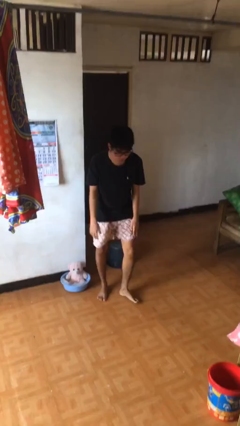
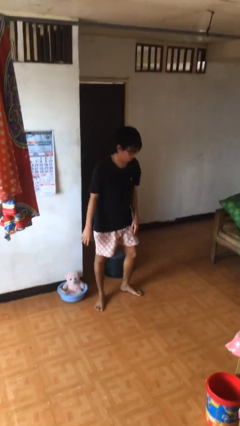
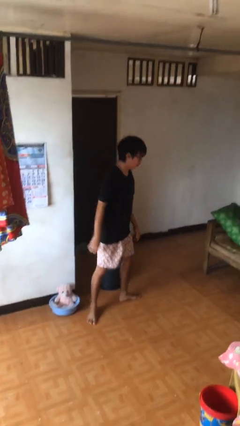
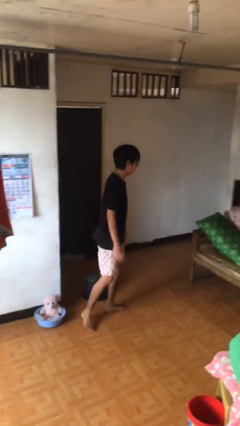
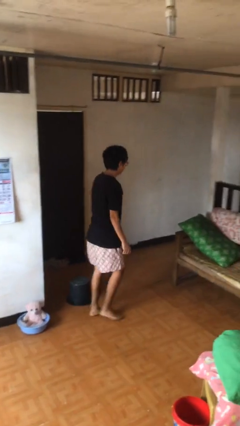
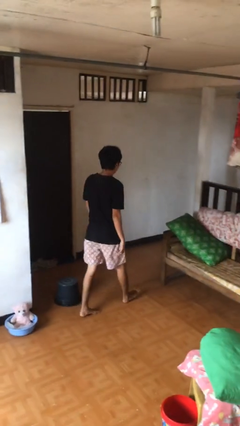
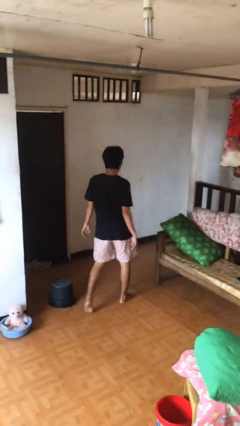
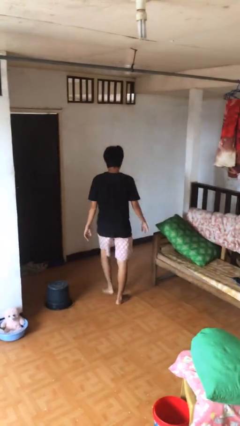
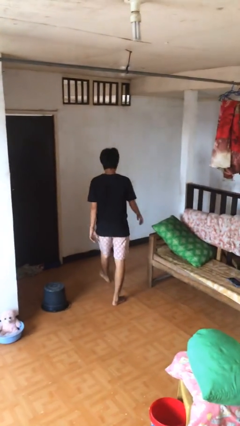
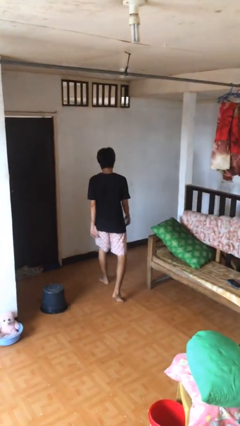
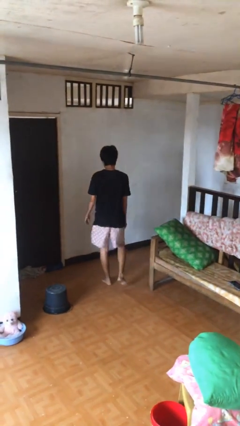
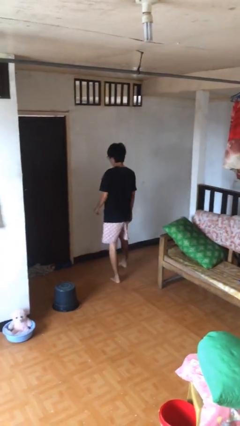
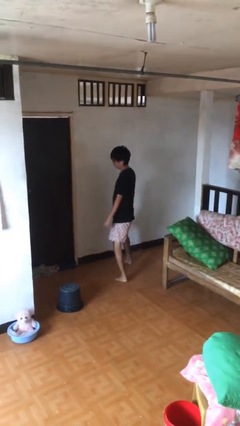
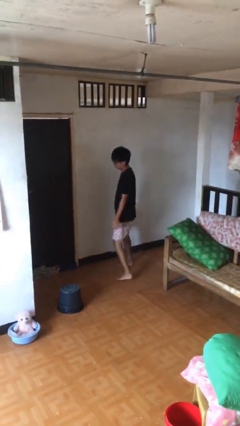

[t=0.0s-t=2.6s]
person stands up from floor

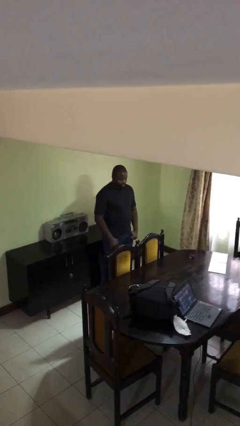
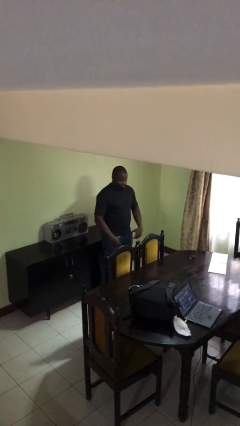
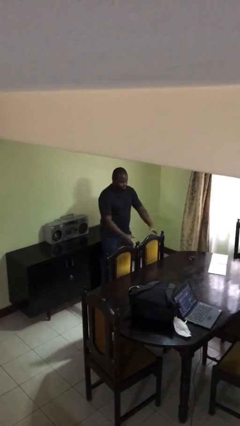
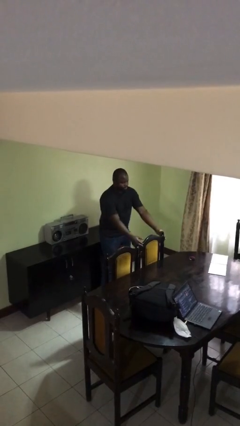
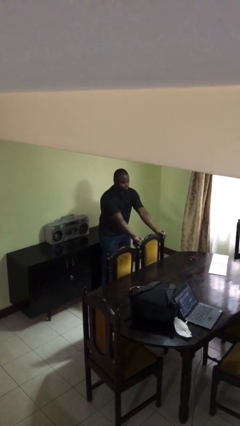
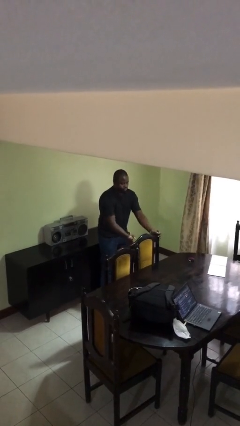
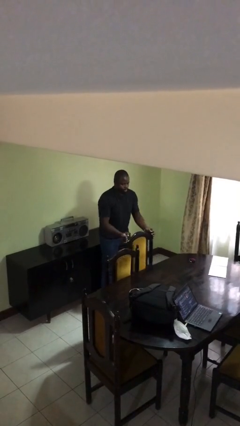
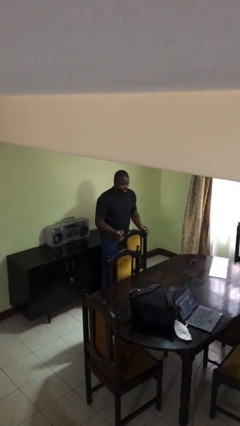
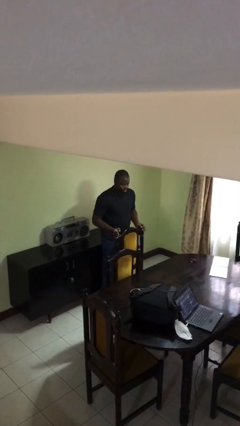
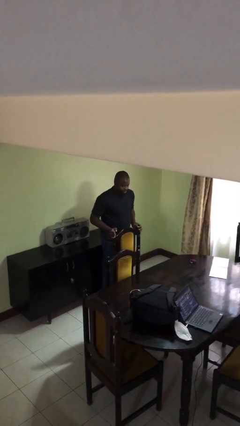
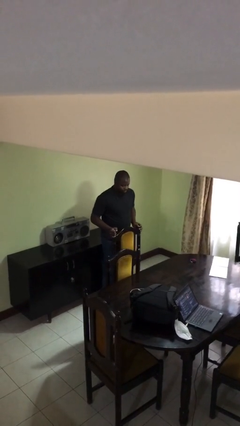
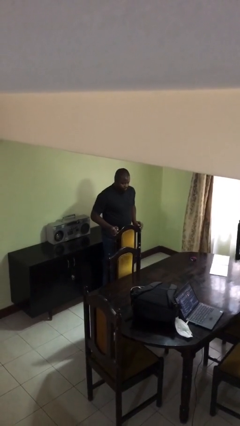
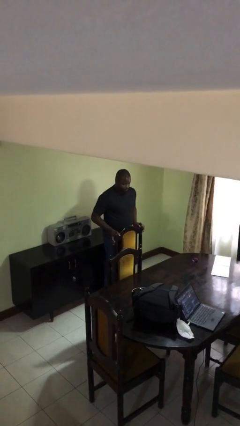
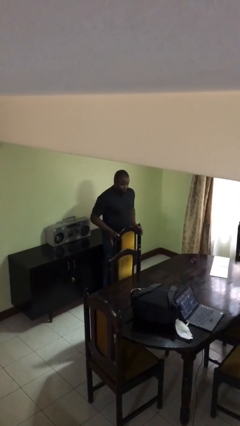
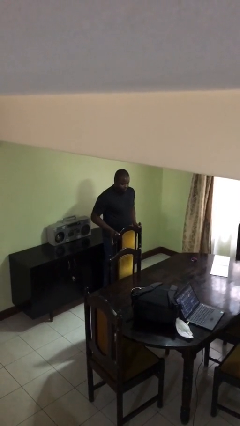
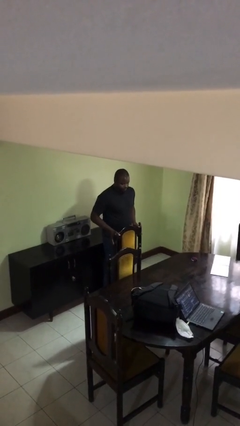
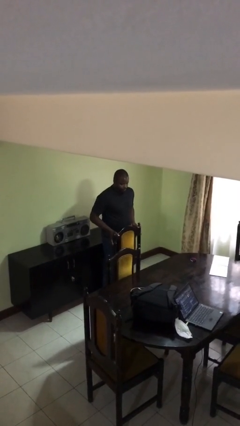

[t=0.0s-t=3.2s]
person pulls out chair

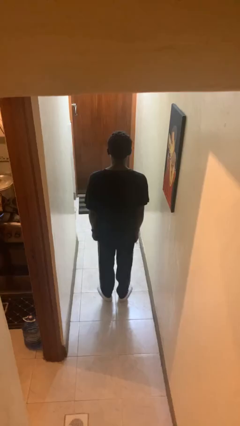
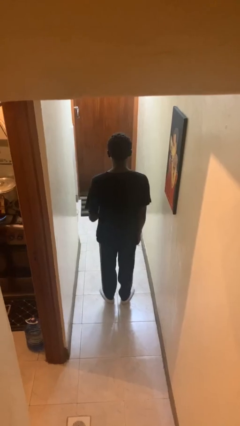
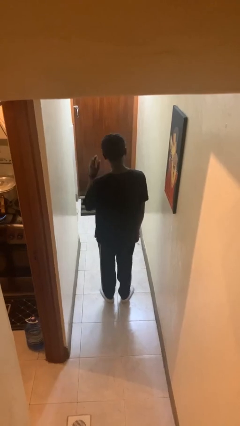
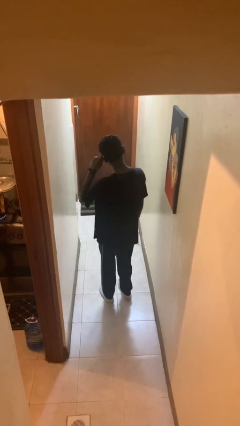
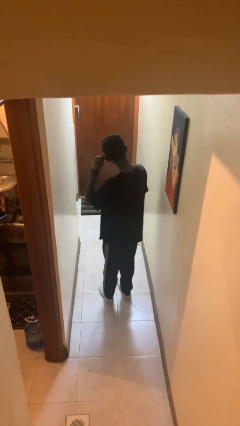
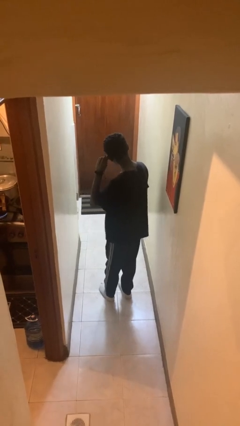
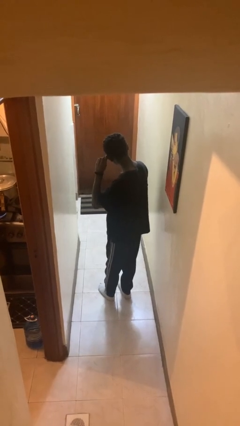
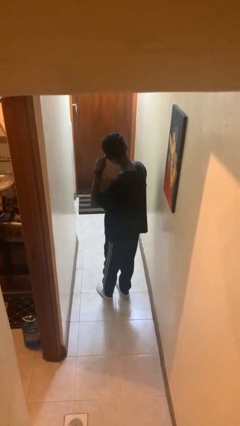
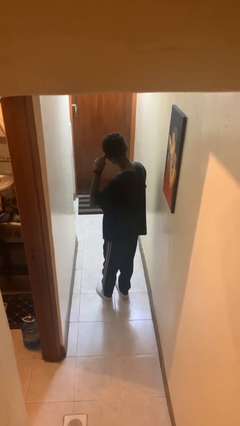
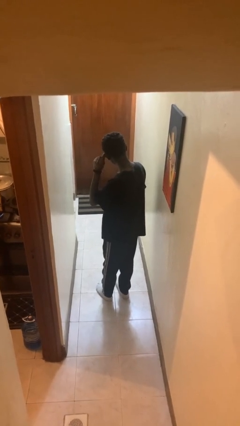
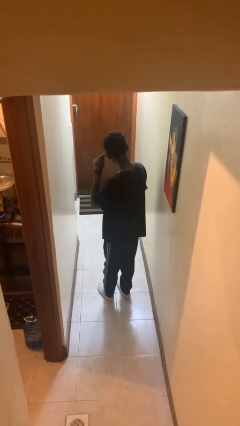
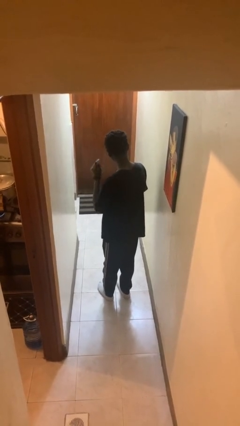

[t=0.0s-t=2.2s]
person touches earlobe

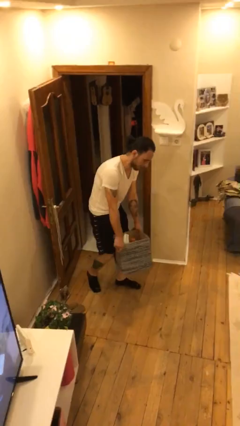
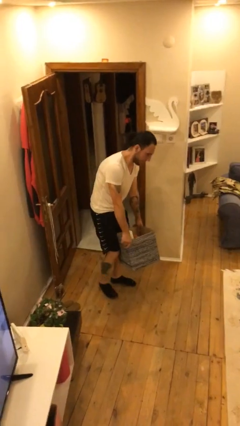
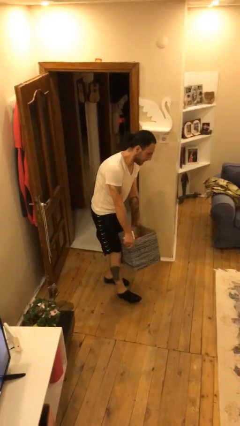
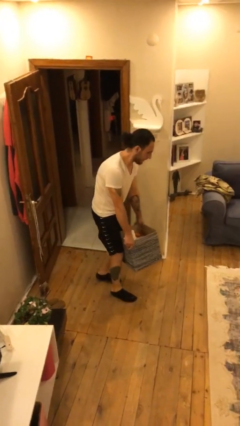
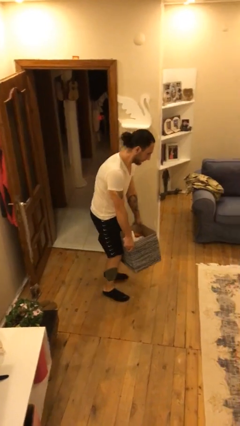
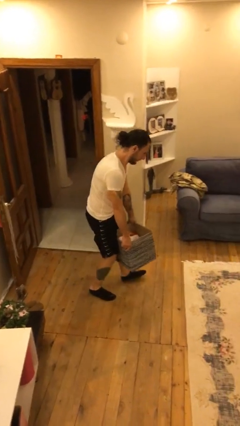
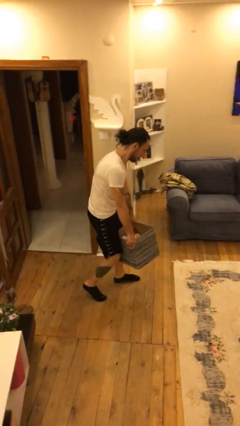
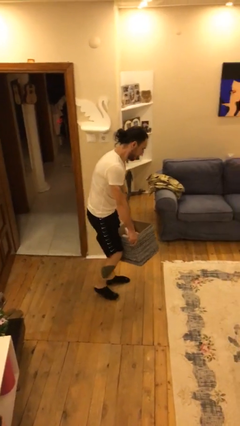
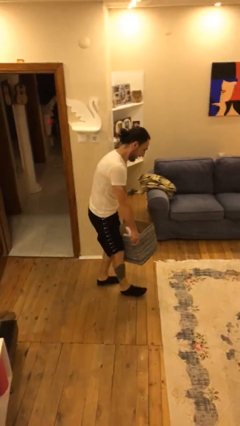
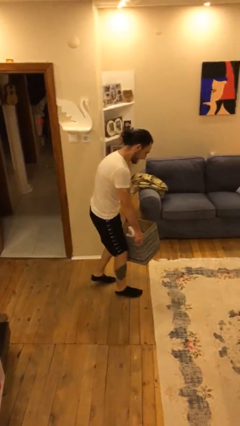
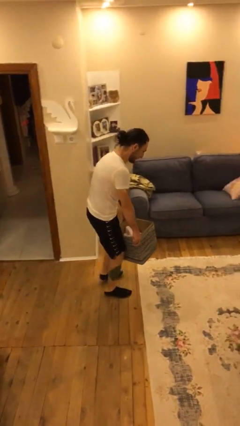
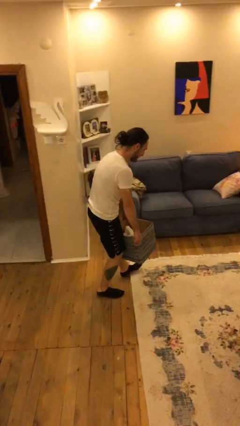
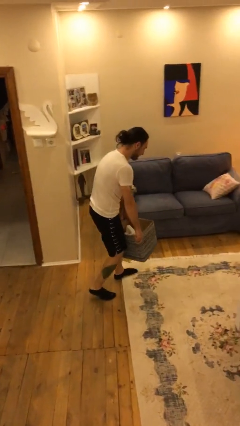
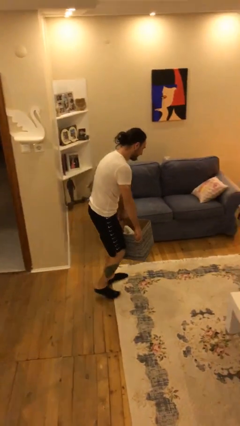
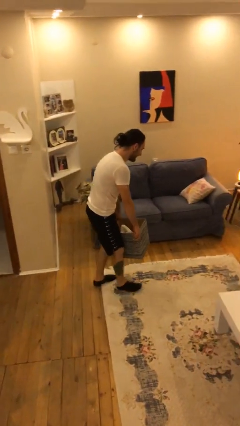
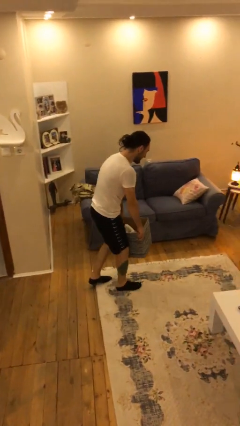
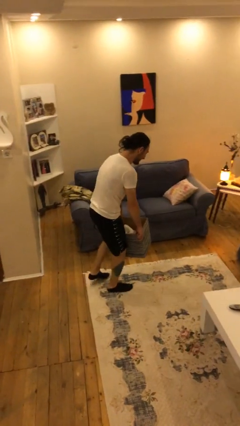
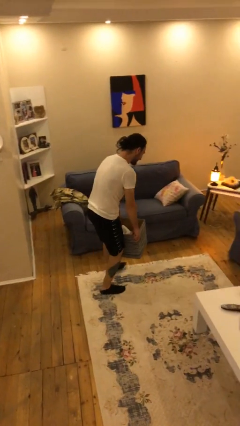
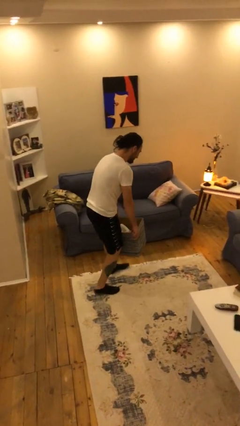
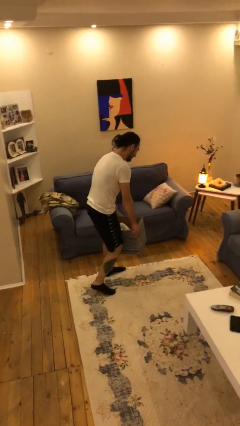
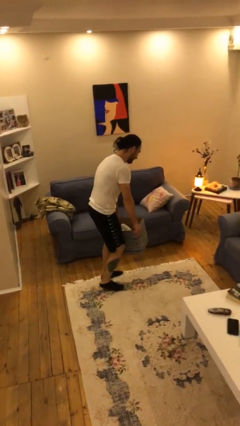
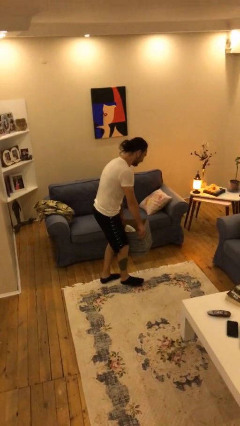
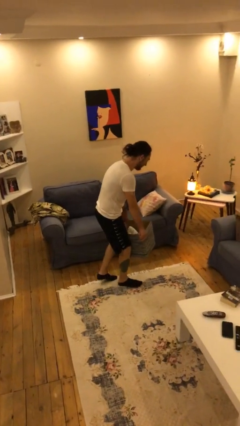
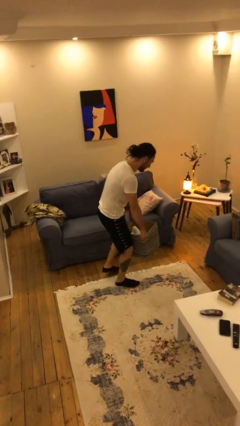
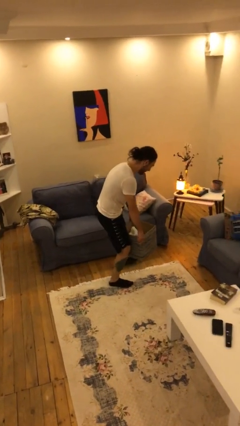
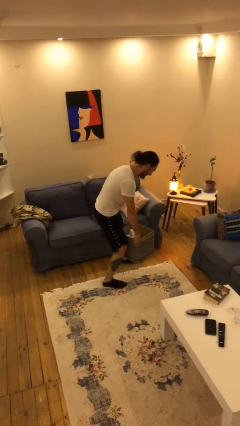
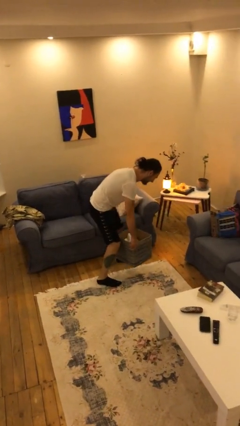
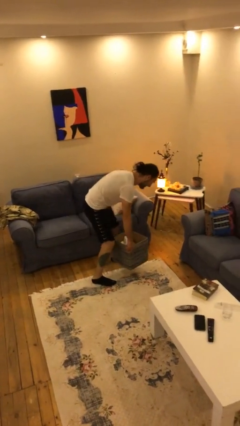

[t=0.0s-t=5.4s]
person carries heavy object

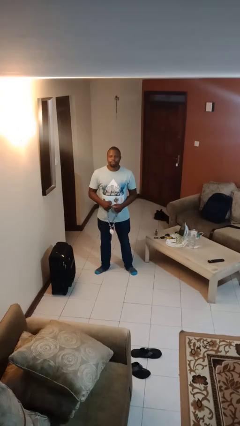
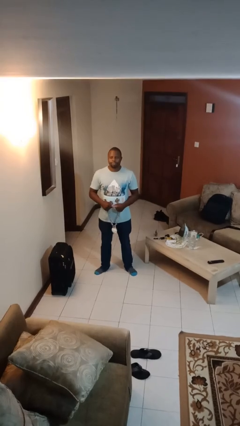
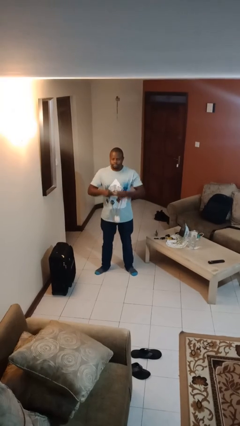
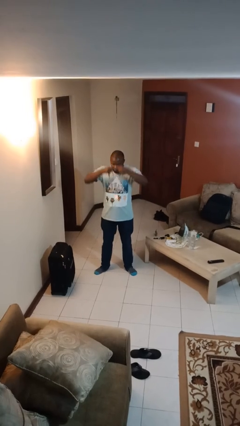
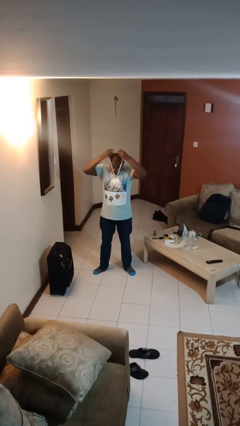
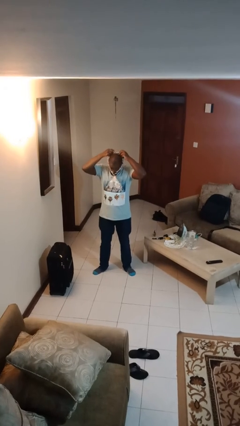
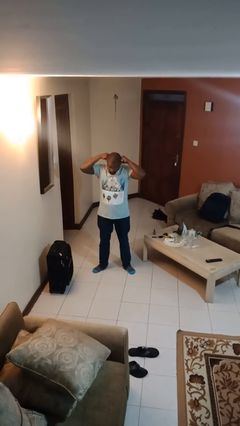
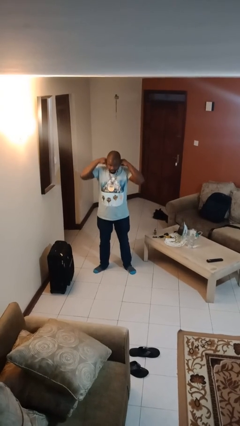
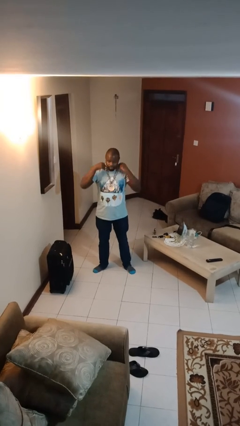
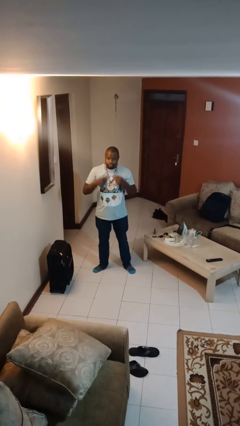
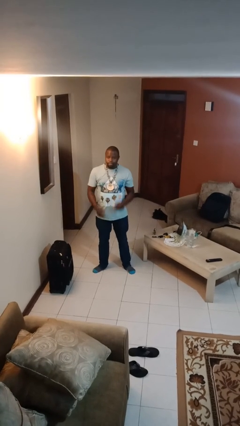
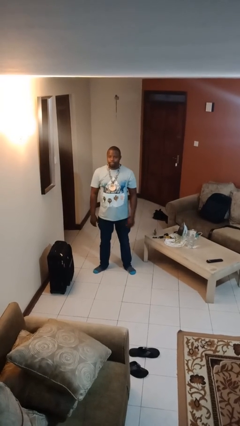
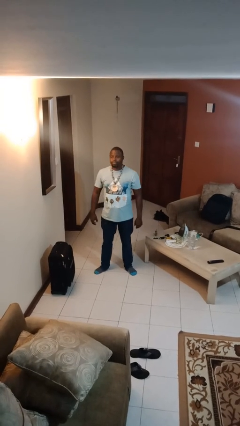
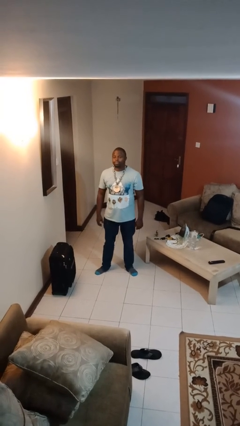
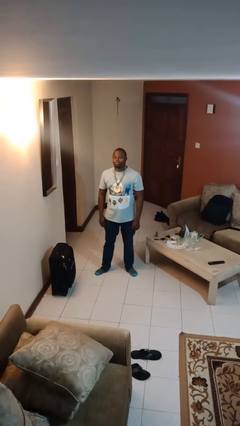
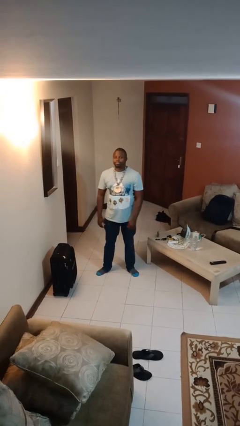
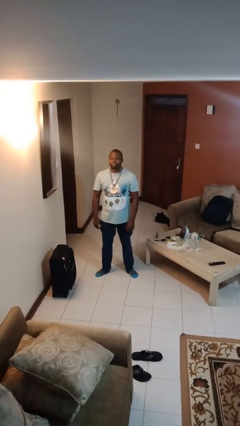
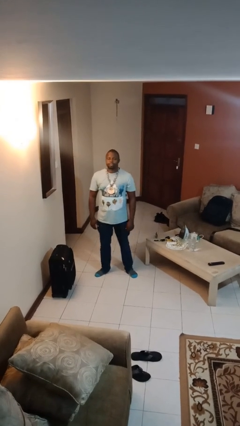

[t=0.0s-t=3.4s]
person puts on necklace

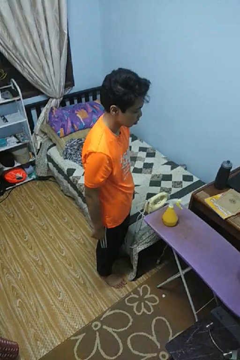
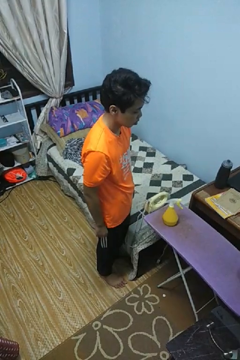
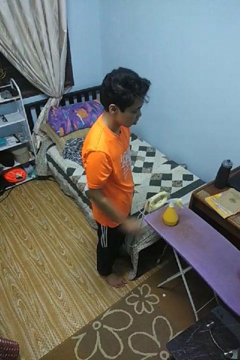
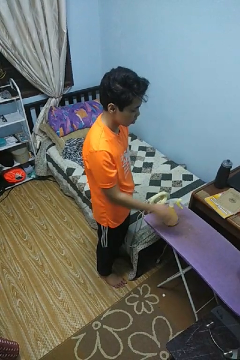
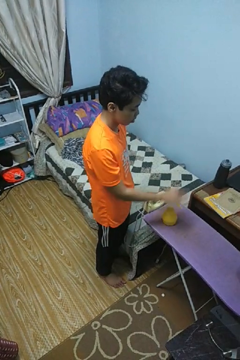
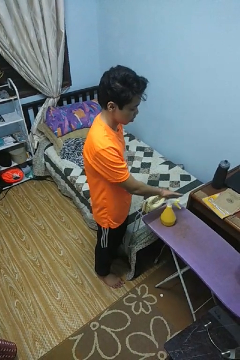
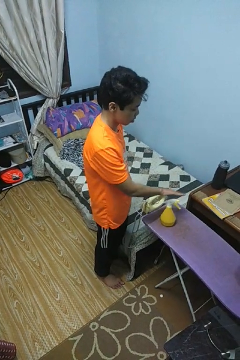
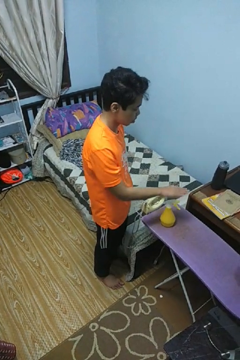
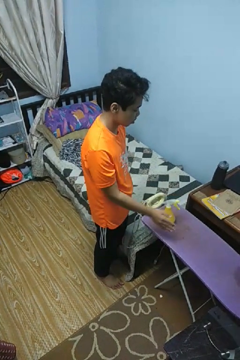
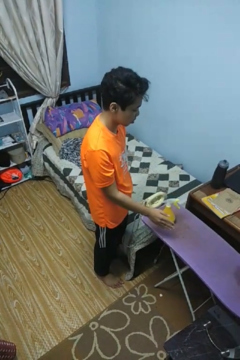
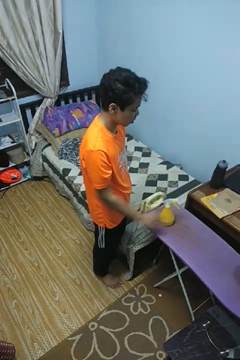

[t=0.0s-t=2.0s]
person waves hand over object
